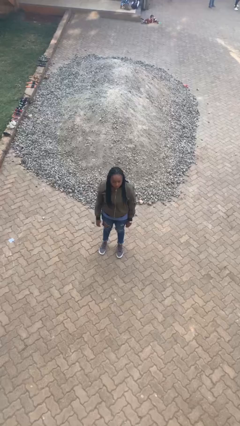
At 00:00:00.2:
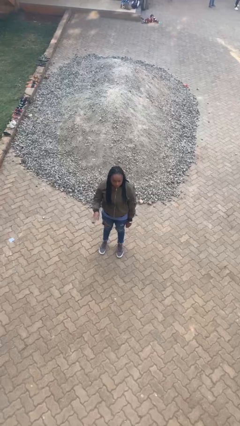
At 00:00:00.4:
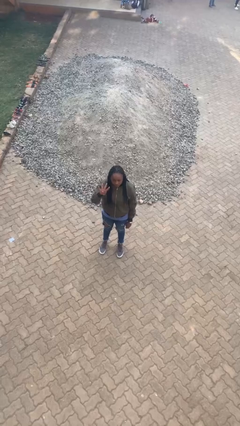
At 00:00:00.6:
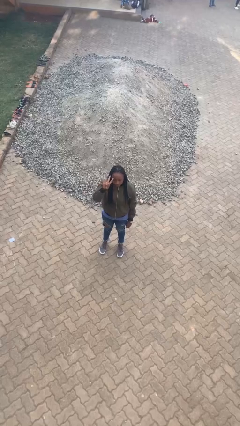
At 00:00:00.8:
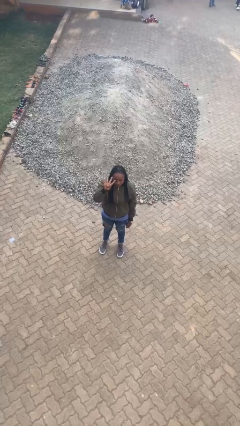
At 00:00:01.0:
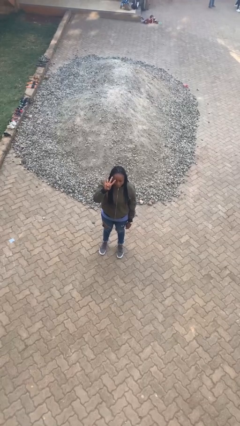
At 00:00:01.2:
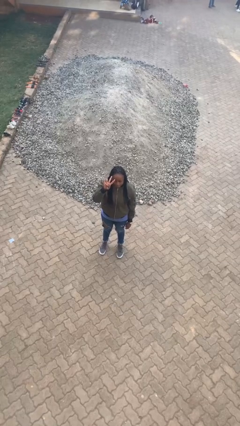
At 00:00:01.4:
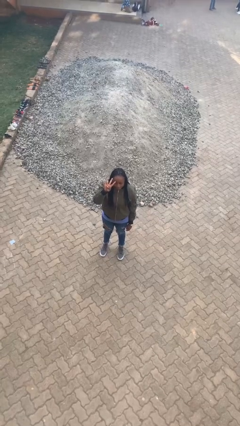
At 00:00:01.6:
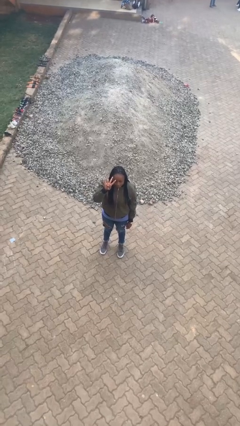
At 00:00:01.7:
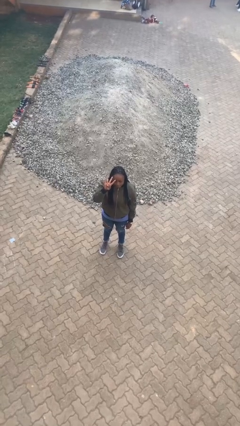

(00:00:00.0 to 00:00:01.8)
person gestures number four

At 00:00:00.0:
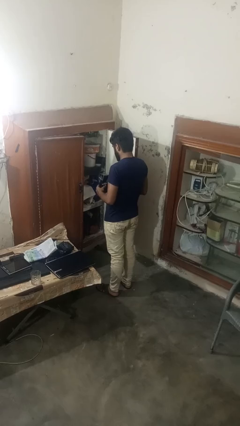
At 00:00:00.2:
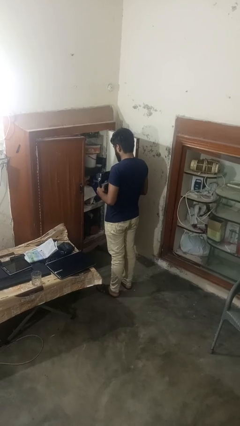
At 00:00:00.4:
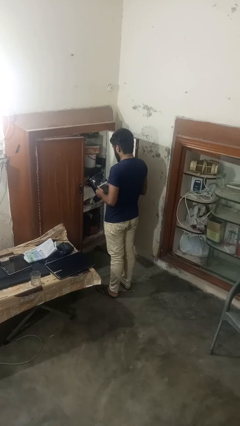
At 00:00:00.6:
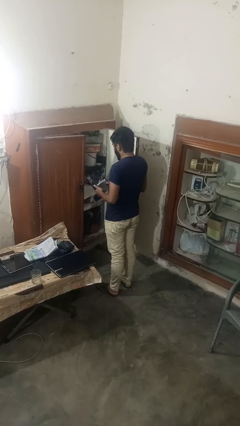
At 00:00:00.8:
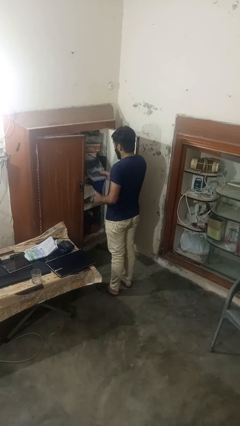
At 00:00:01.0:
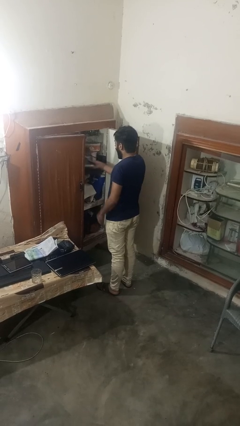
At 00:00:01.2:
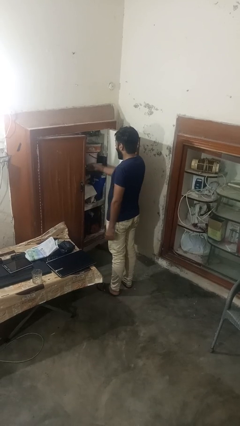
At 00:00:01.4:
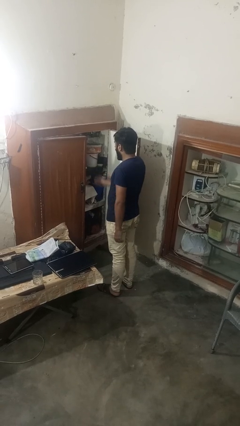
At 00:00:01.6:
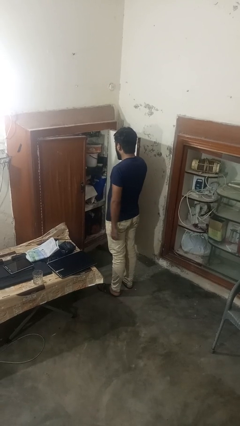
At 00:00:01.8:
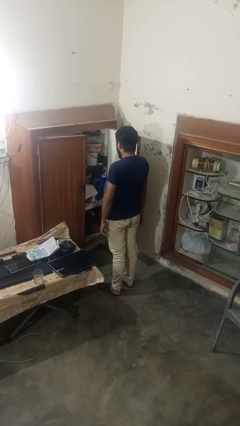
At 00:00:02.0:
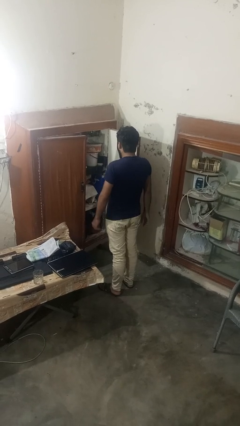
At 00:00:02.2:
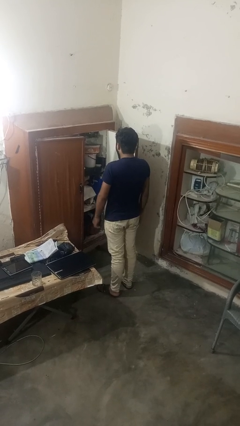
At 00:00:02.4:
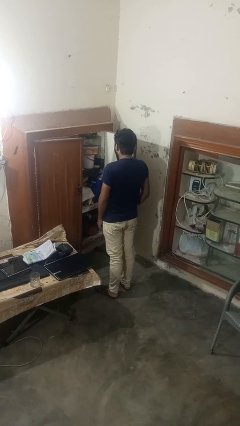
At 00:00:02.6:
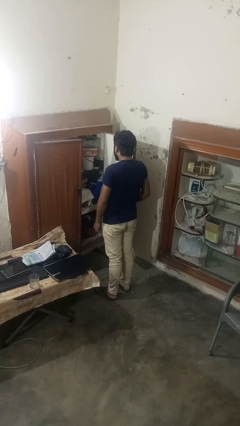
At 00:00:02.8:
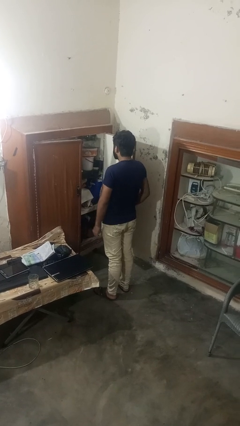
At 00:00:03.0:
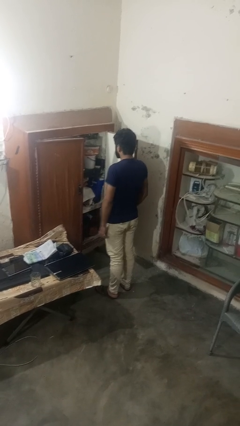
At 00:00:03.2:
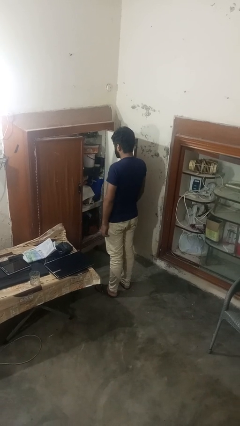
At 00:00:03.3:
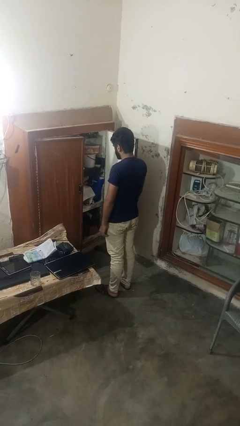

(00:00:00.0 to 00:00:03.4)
person puts down object into cabinet

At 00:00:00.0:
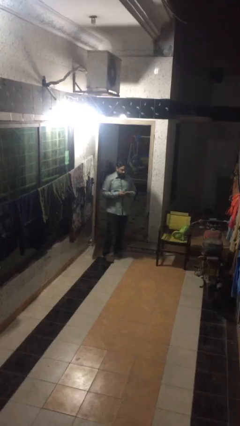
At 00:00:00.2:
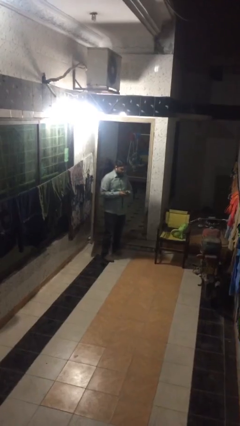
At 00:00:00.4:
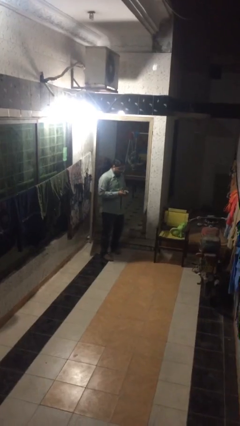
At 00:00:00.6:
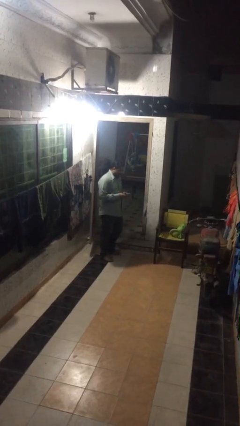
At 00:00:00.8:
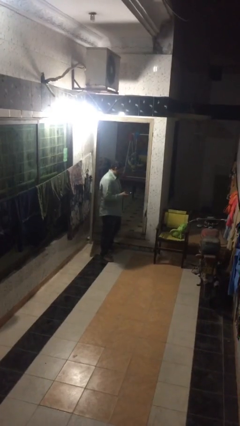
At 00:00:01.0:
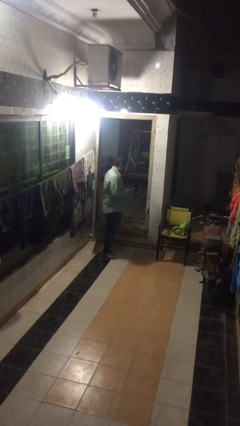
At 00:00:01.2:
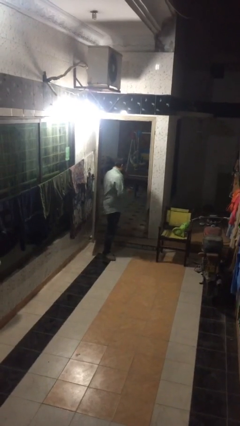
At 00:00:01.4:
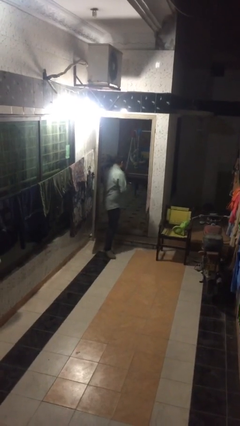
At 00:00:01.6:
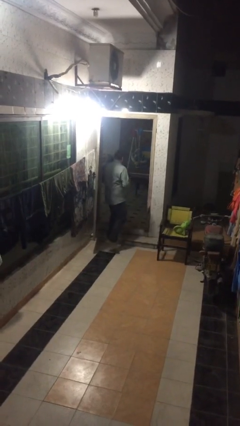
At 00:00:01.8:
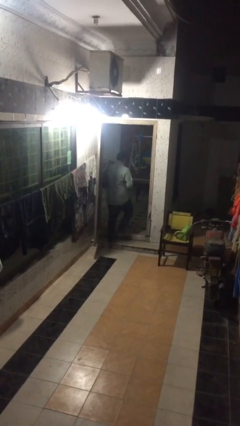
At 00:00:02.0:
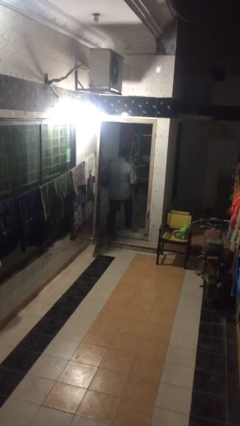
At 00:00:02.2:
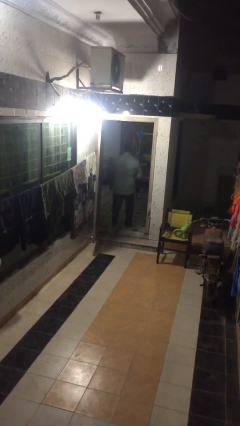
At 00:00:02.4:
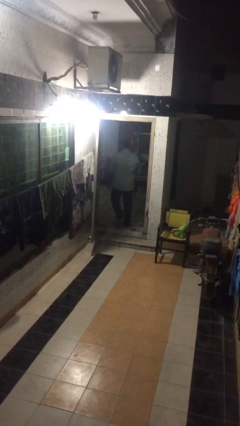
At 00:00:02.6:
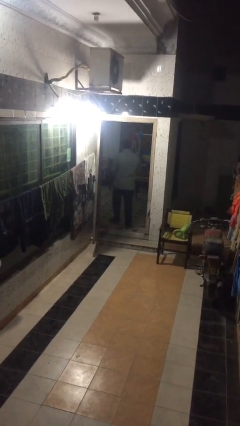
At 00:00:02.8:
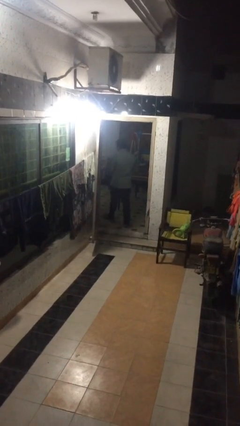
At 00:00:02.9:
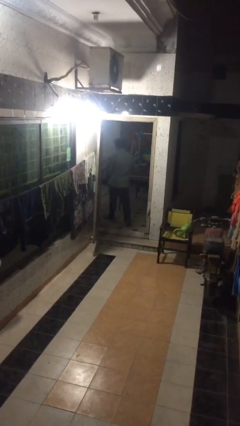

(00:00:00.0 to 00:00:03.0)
person exits scene through structure

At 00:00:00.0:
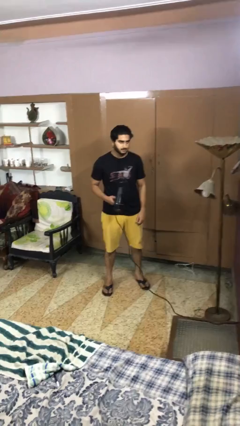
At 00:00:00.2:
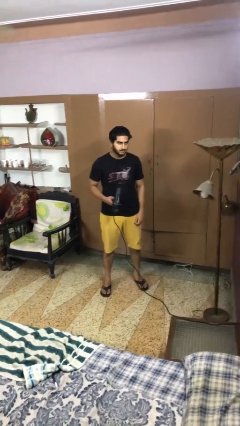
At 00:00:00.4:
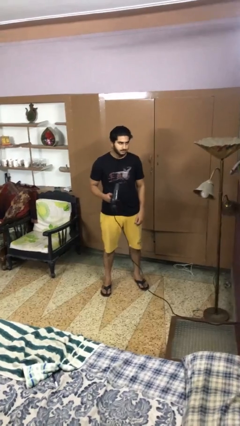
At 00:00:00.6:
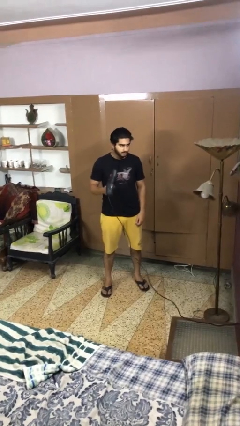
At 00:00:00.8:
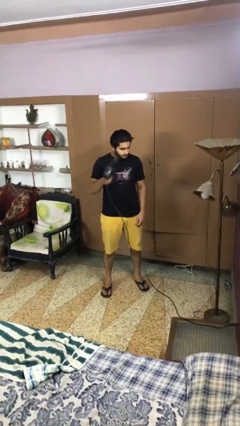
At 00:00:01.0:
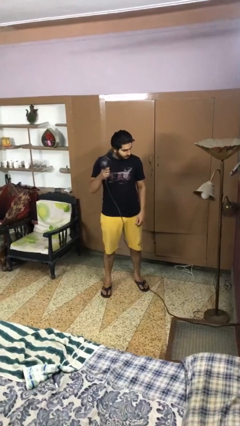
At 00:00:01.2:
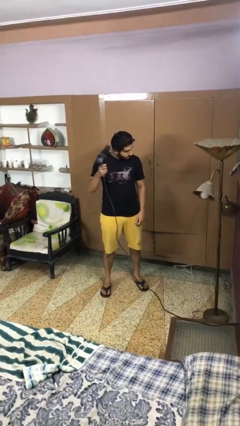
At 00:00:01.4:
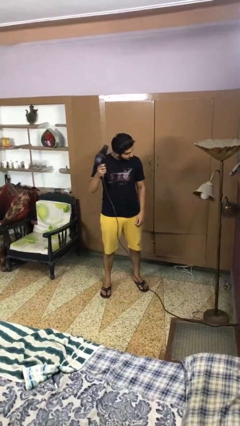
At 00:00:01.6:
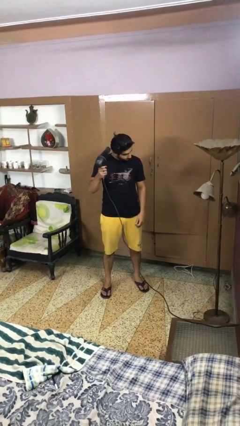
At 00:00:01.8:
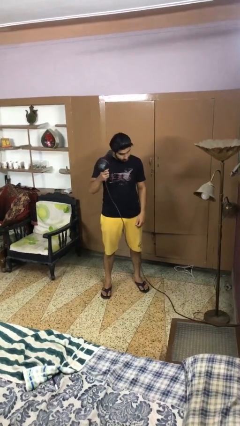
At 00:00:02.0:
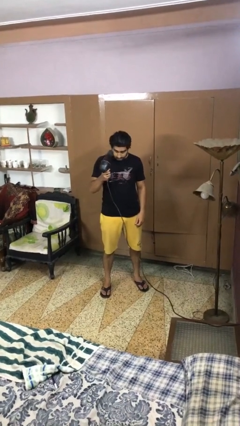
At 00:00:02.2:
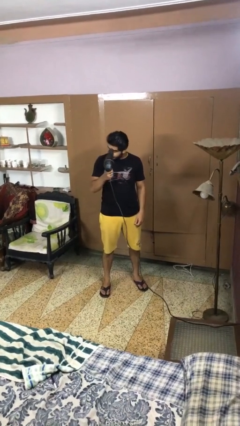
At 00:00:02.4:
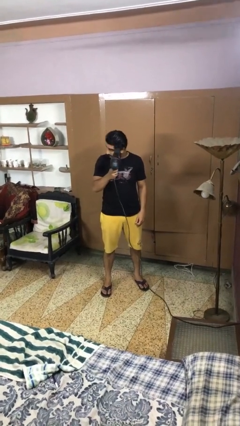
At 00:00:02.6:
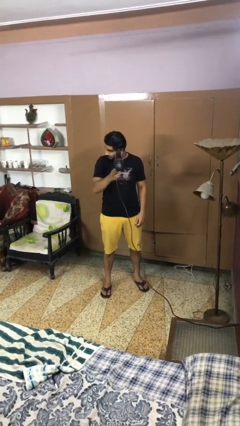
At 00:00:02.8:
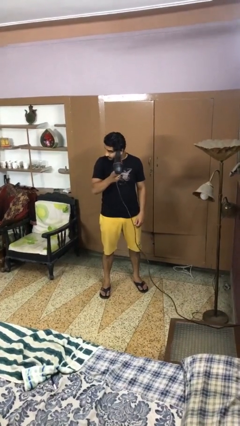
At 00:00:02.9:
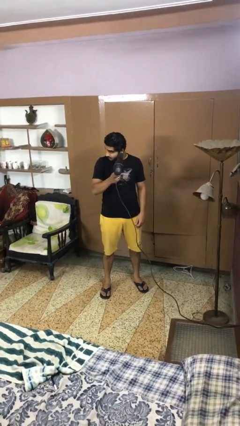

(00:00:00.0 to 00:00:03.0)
person dries hair with hairdryer

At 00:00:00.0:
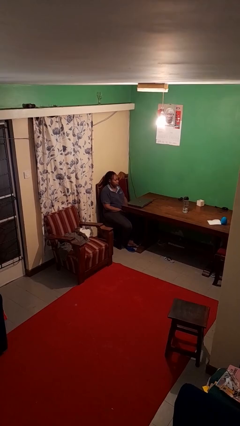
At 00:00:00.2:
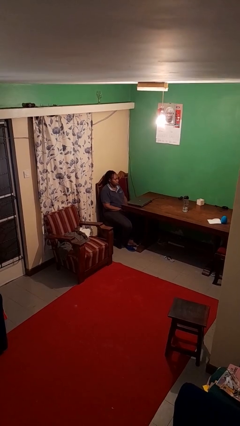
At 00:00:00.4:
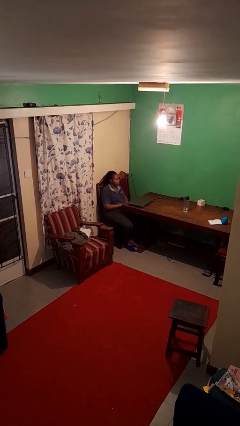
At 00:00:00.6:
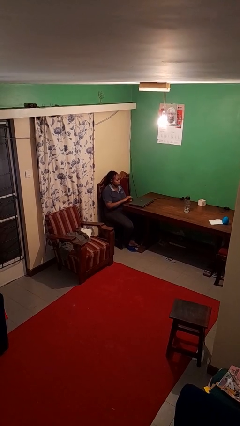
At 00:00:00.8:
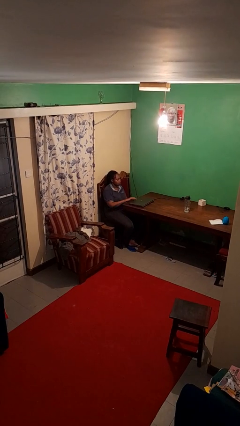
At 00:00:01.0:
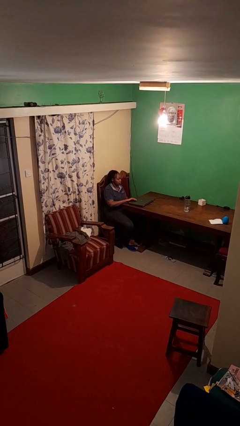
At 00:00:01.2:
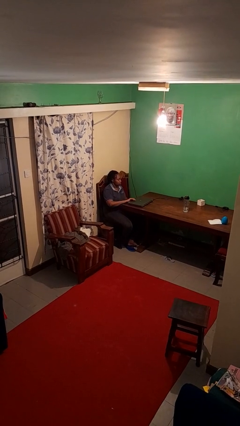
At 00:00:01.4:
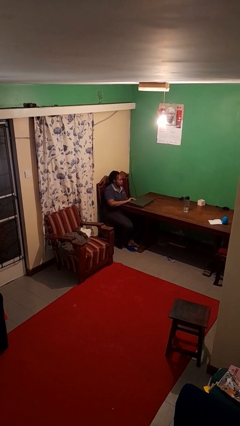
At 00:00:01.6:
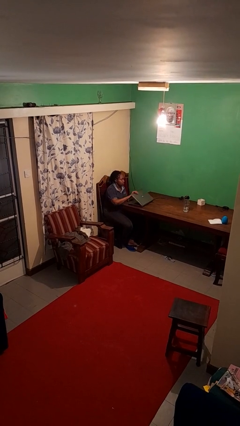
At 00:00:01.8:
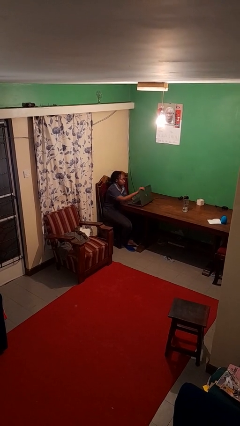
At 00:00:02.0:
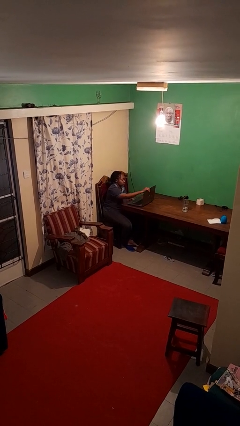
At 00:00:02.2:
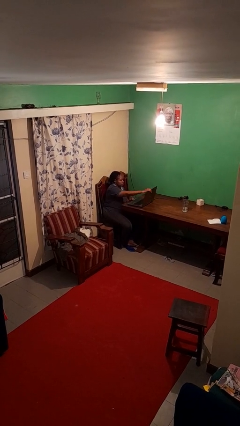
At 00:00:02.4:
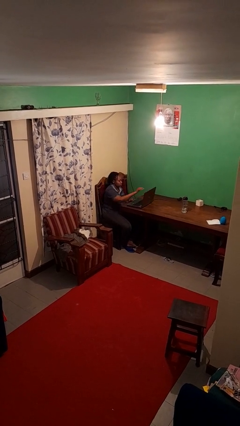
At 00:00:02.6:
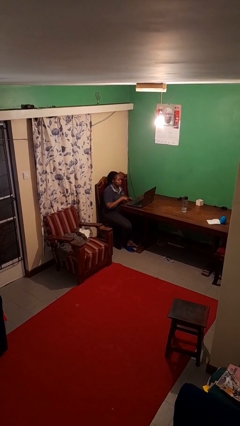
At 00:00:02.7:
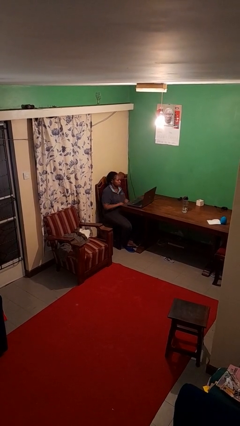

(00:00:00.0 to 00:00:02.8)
person opens laptop

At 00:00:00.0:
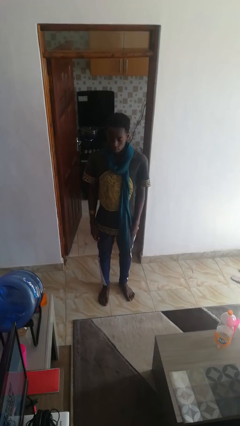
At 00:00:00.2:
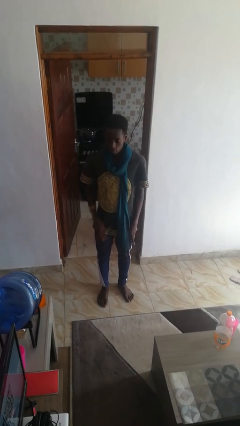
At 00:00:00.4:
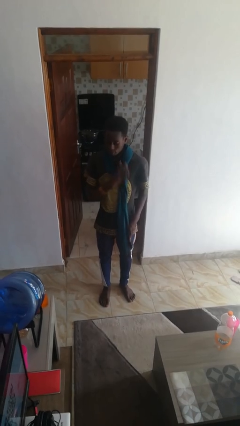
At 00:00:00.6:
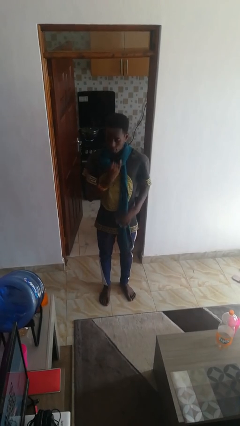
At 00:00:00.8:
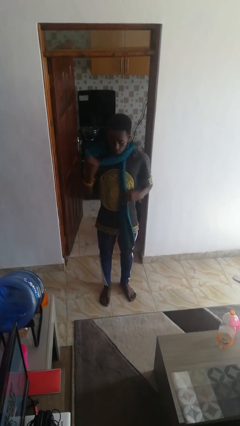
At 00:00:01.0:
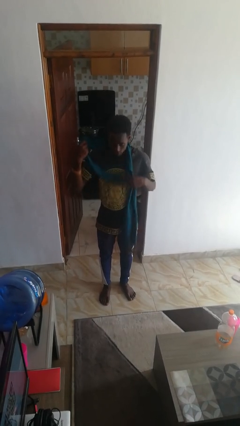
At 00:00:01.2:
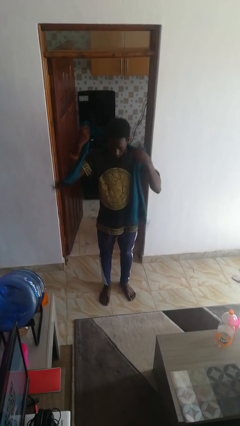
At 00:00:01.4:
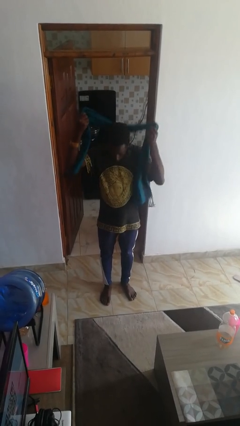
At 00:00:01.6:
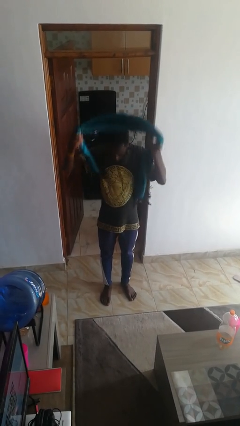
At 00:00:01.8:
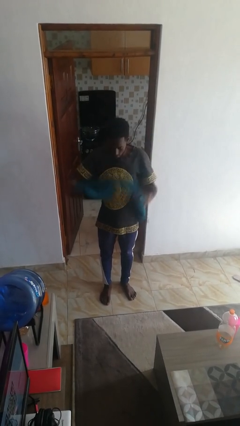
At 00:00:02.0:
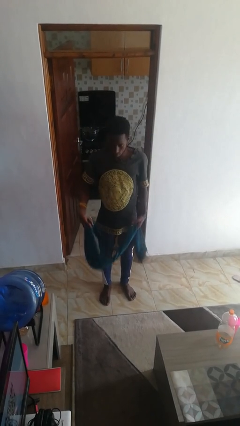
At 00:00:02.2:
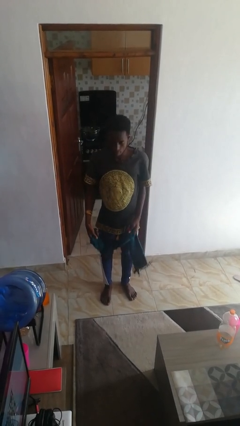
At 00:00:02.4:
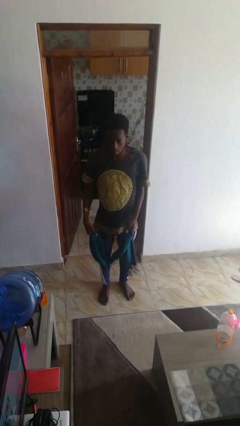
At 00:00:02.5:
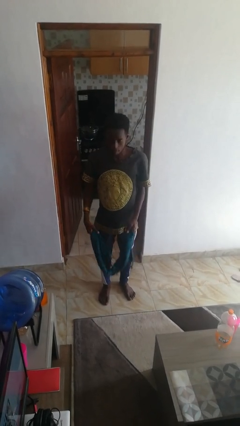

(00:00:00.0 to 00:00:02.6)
person takes off scarf

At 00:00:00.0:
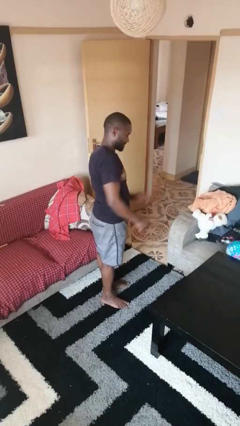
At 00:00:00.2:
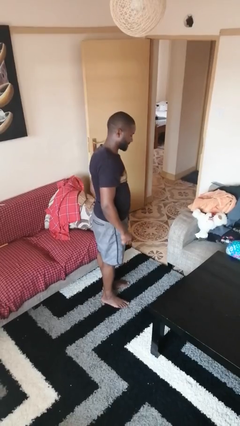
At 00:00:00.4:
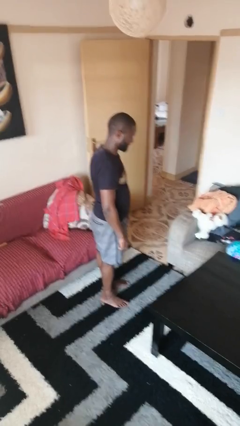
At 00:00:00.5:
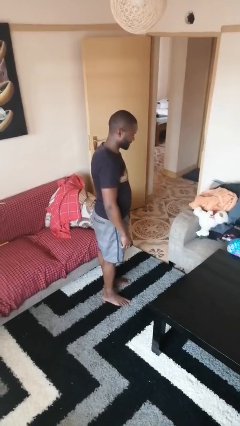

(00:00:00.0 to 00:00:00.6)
person swats bug
